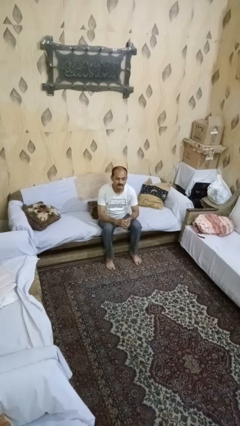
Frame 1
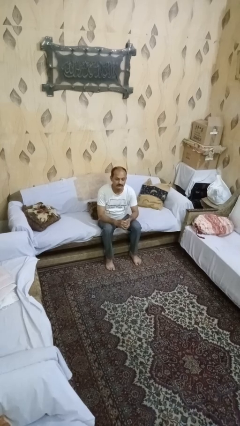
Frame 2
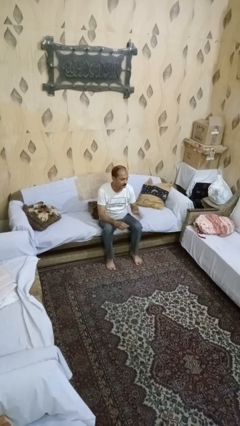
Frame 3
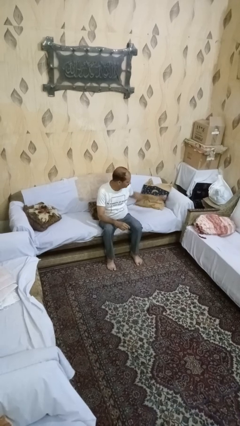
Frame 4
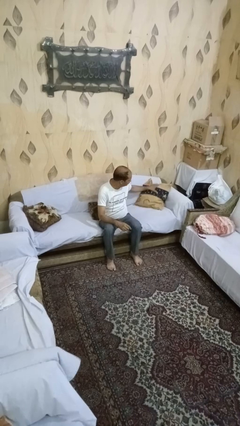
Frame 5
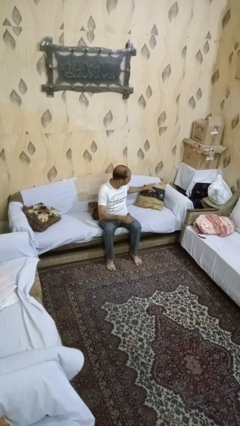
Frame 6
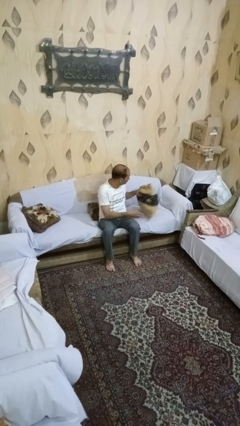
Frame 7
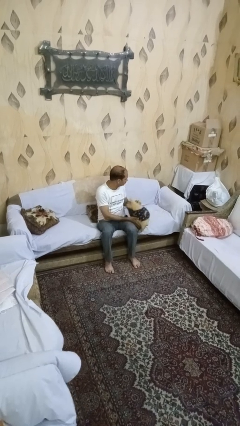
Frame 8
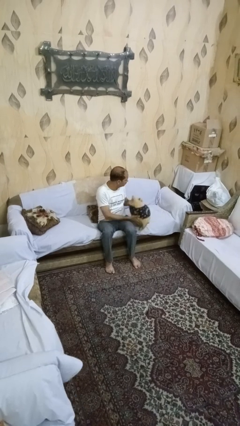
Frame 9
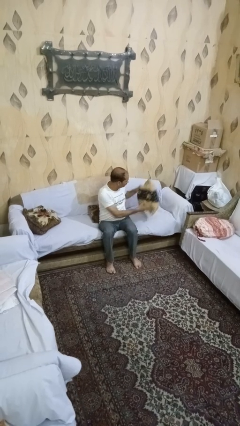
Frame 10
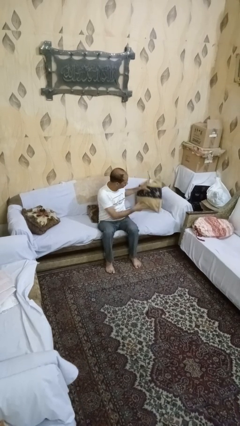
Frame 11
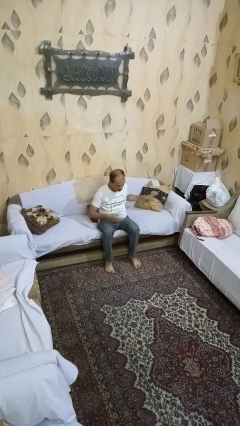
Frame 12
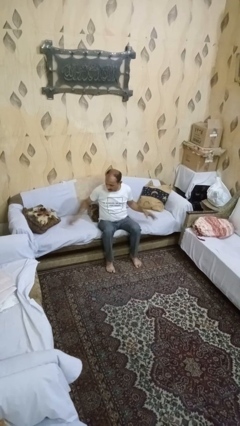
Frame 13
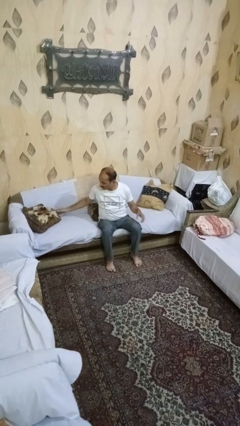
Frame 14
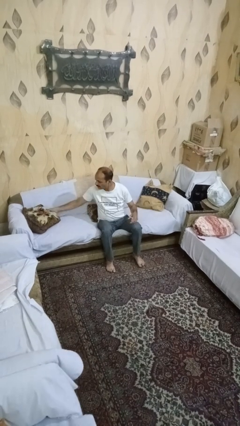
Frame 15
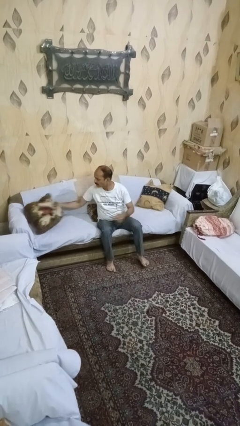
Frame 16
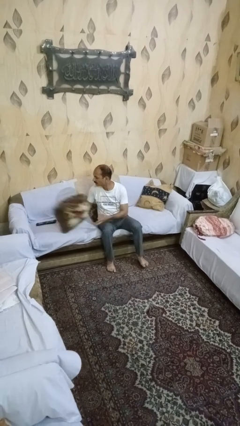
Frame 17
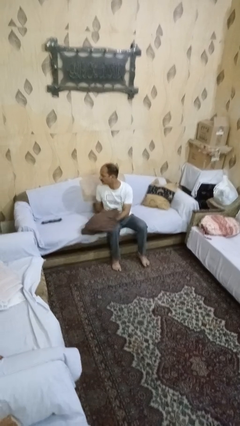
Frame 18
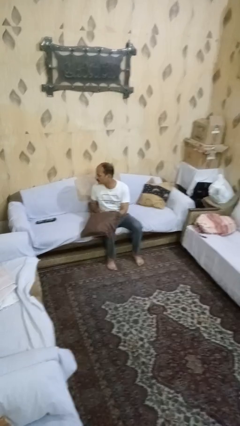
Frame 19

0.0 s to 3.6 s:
person searches in couch

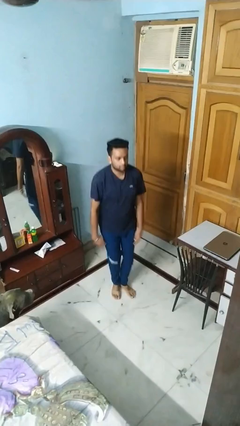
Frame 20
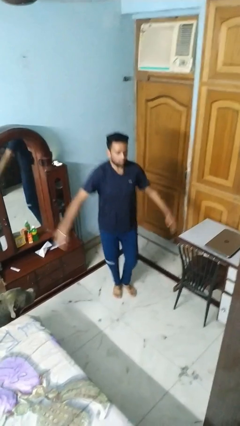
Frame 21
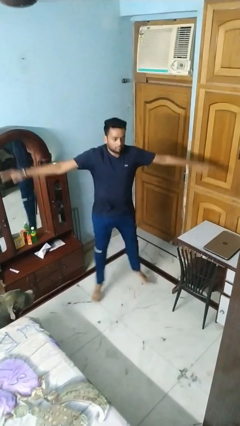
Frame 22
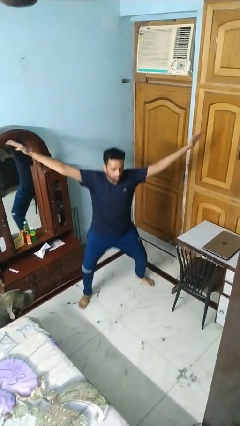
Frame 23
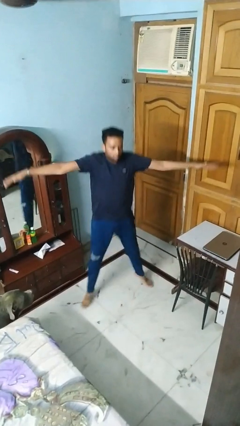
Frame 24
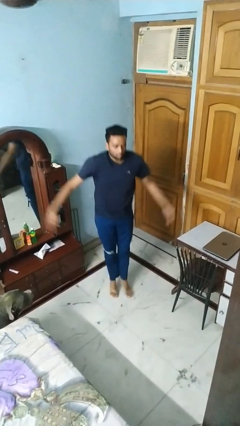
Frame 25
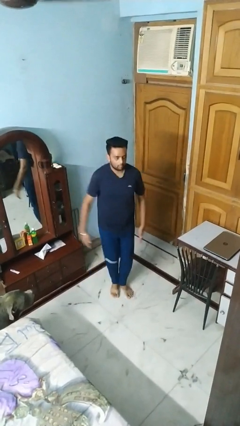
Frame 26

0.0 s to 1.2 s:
person exercises with jumping jacks

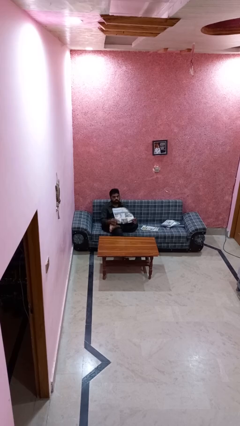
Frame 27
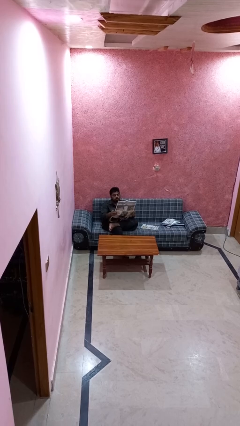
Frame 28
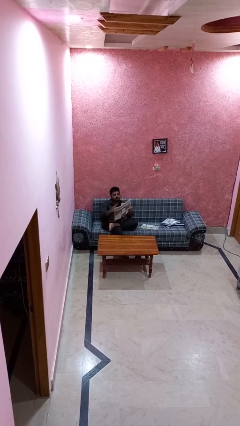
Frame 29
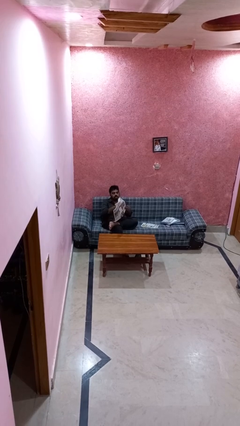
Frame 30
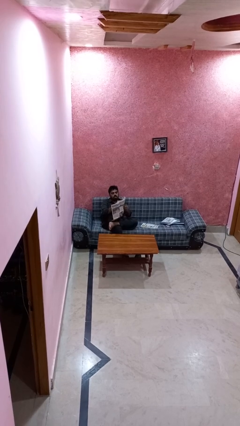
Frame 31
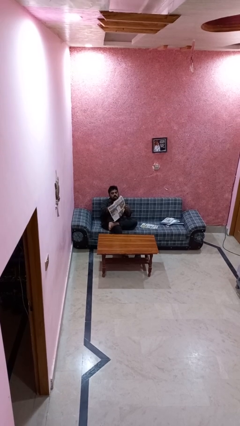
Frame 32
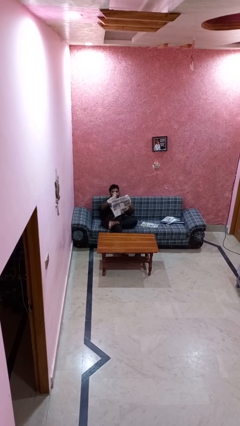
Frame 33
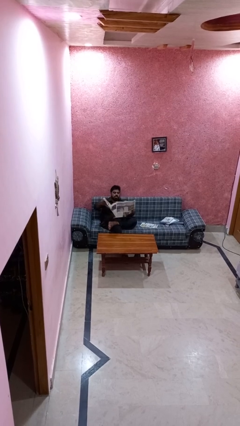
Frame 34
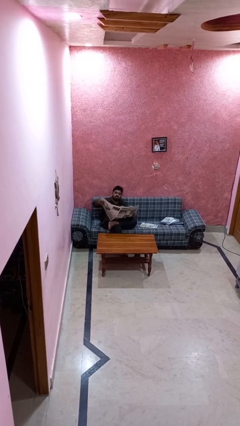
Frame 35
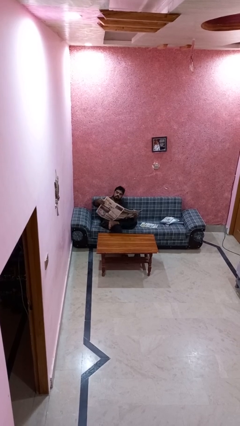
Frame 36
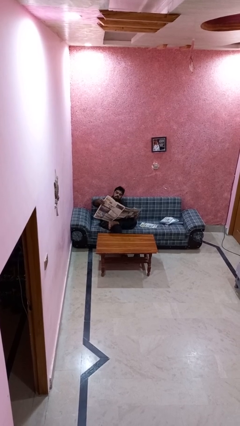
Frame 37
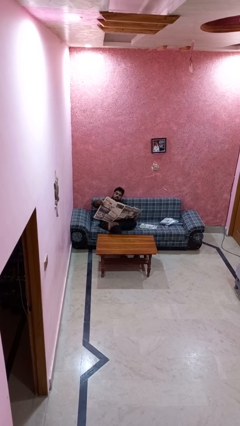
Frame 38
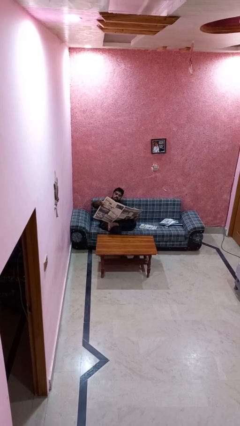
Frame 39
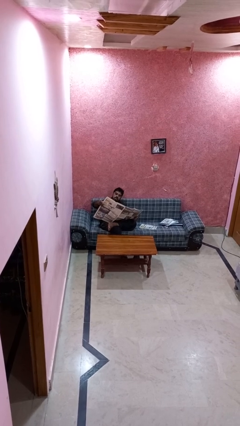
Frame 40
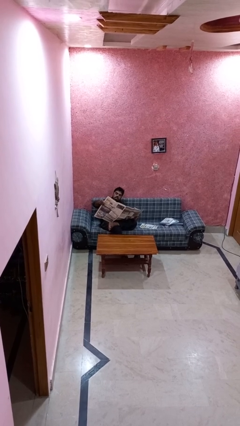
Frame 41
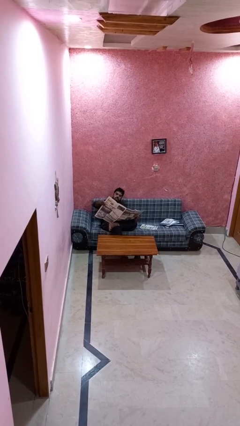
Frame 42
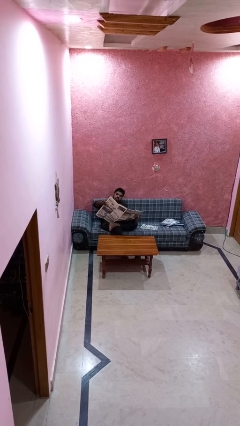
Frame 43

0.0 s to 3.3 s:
person reads newspaper

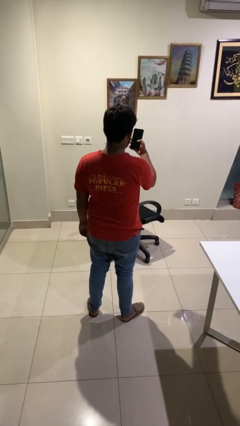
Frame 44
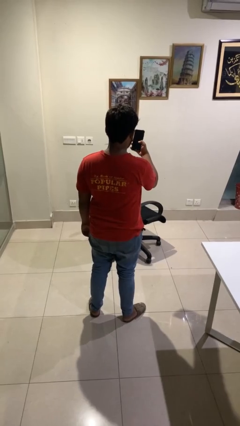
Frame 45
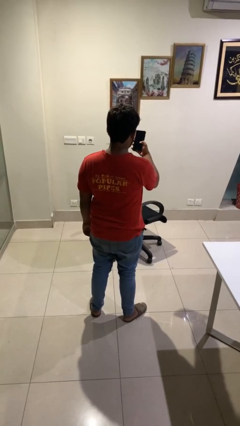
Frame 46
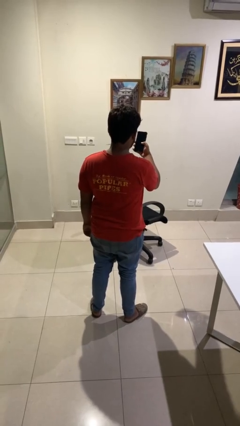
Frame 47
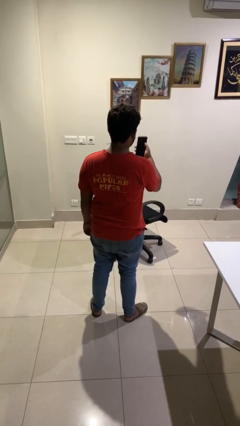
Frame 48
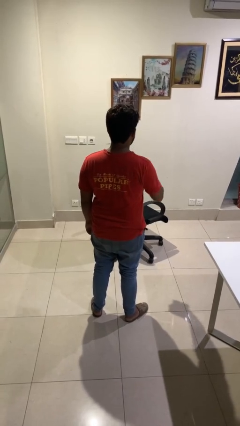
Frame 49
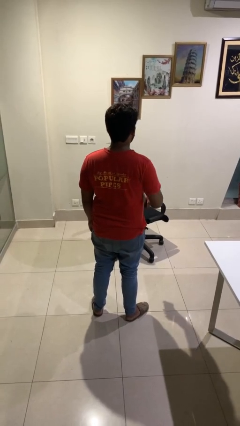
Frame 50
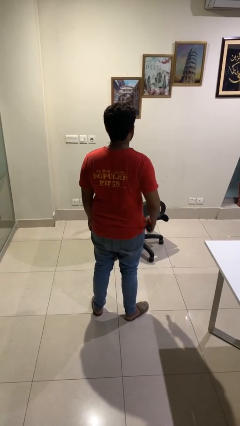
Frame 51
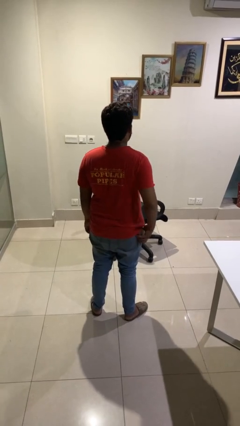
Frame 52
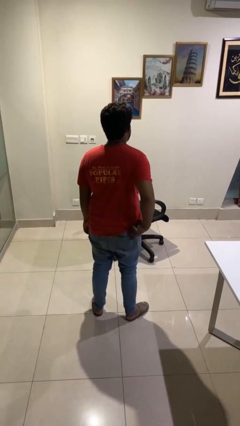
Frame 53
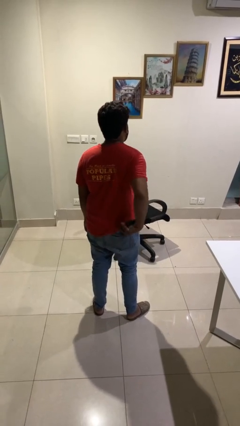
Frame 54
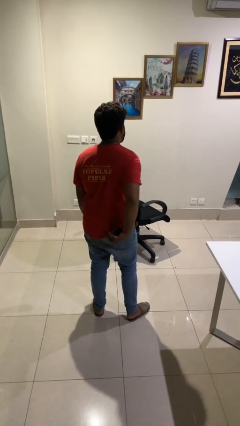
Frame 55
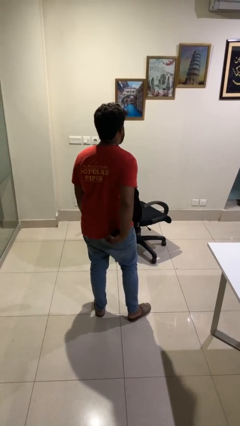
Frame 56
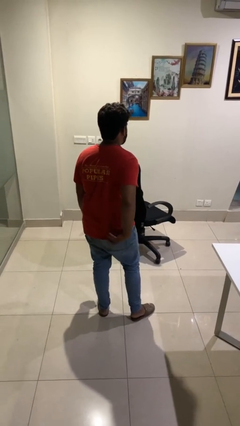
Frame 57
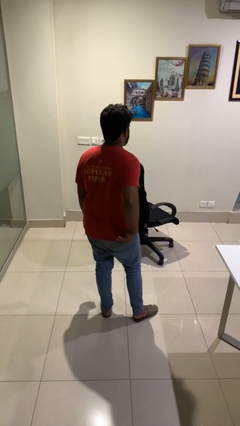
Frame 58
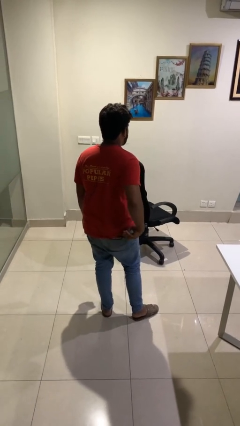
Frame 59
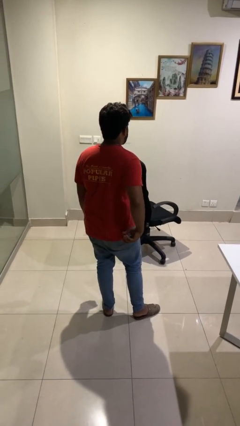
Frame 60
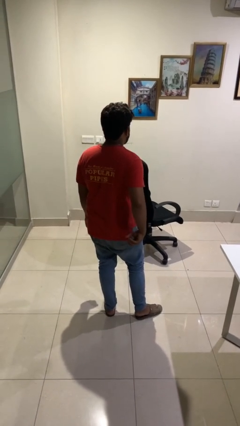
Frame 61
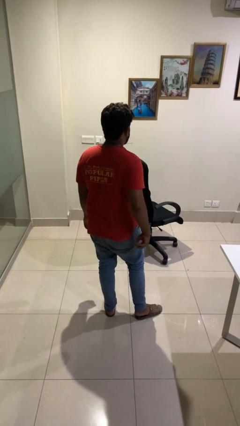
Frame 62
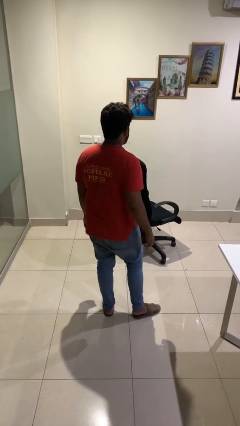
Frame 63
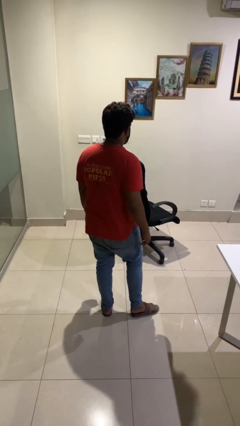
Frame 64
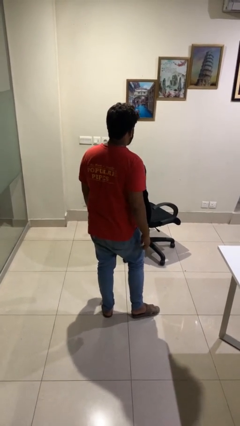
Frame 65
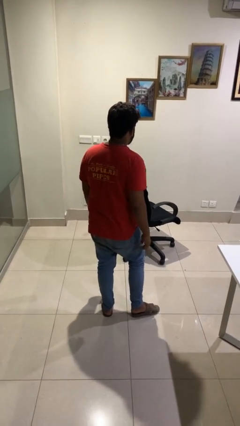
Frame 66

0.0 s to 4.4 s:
person puts phone into pocket

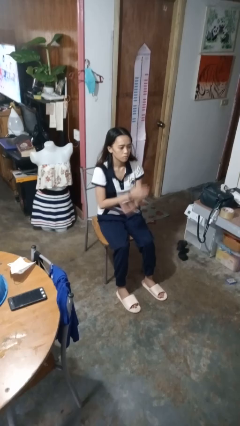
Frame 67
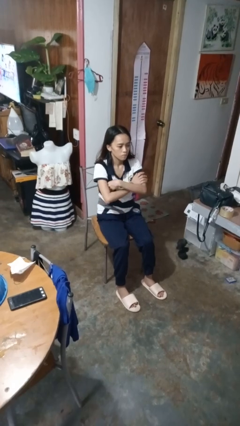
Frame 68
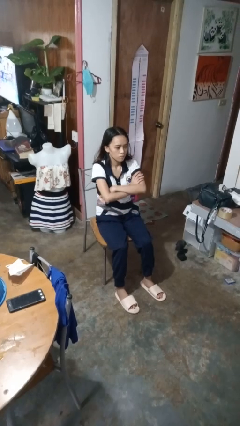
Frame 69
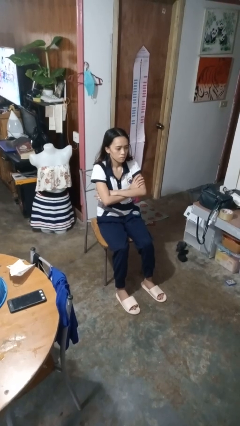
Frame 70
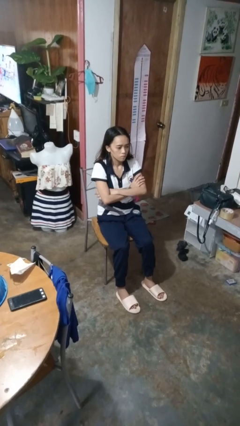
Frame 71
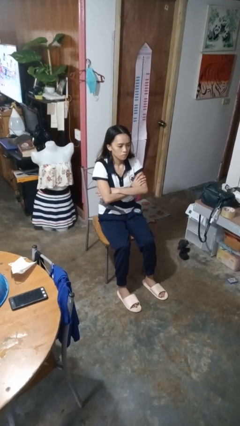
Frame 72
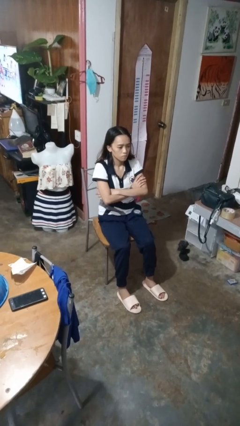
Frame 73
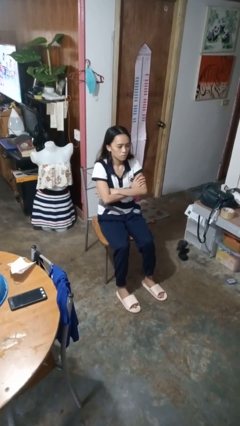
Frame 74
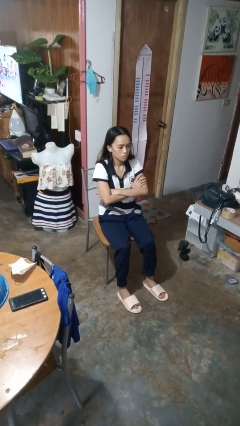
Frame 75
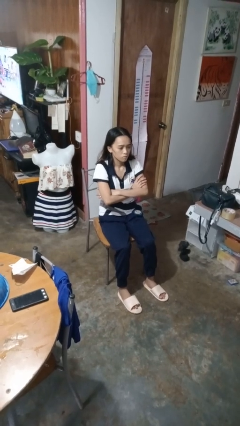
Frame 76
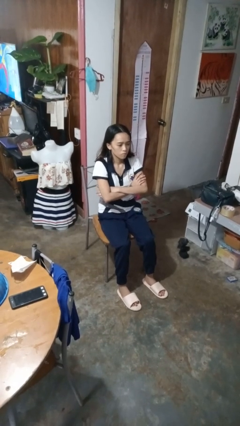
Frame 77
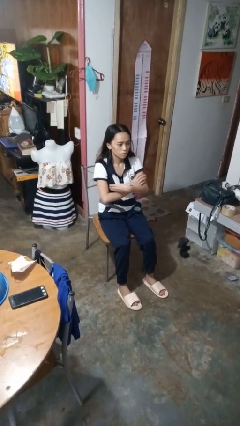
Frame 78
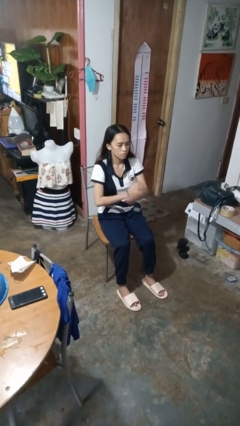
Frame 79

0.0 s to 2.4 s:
person crosses arms

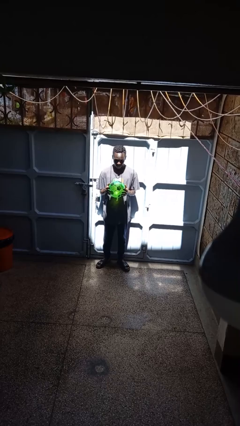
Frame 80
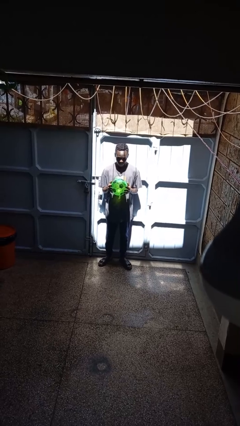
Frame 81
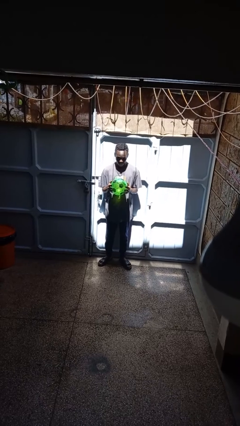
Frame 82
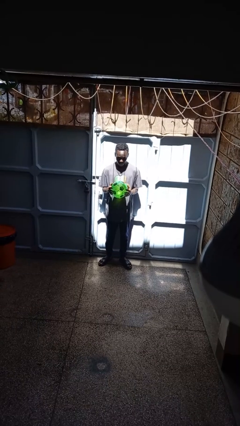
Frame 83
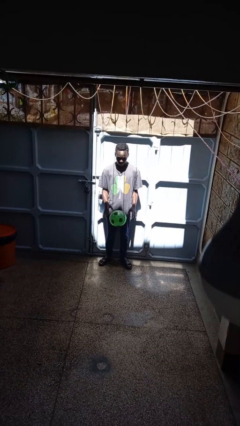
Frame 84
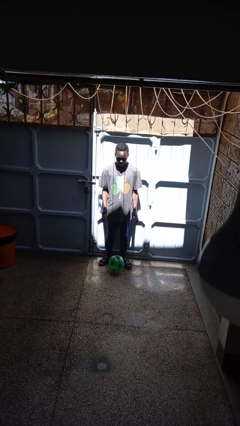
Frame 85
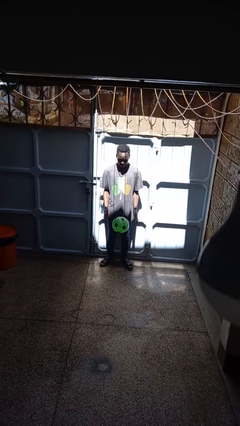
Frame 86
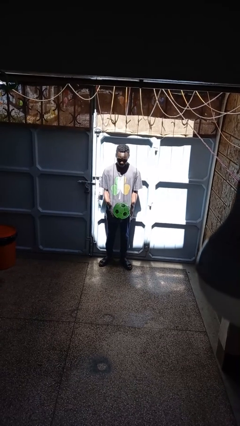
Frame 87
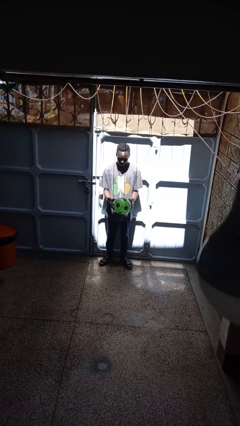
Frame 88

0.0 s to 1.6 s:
person bounces ball on floor

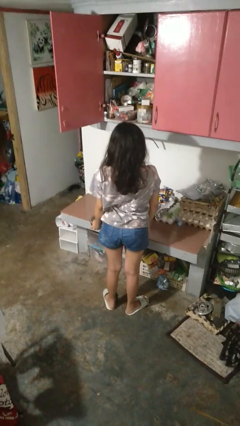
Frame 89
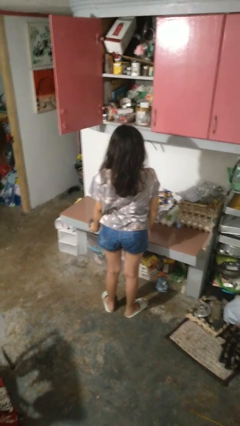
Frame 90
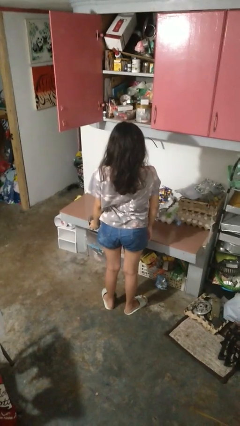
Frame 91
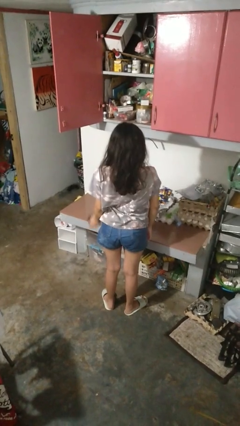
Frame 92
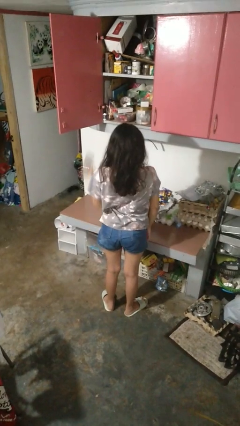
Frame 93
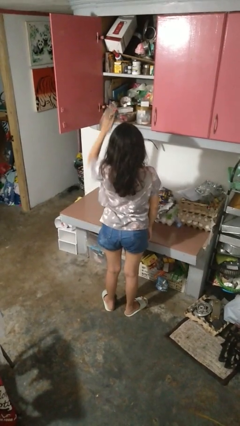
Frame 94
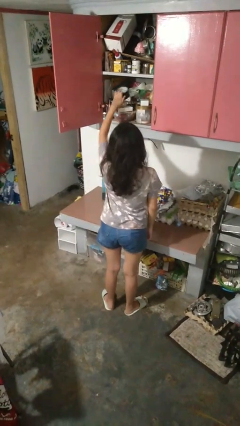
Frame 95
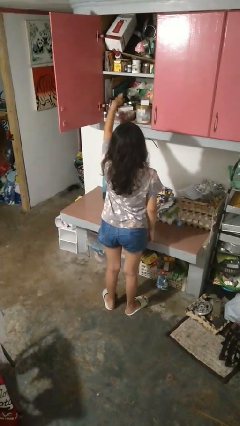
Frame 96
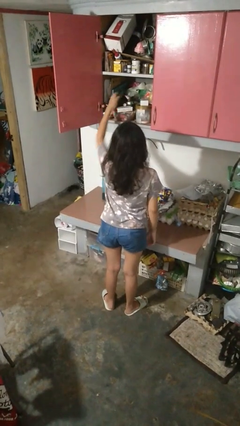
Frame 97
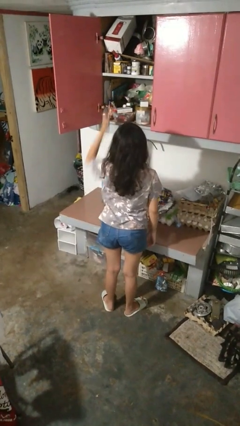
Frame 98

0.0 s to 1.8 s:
person puts object in cabinet
